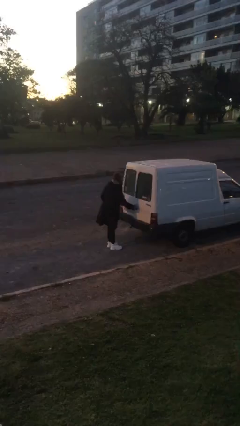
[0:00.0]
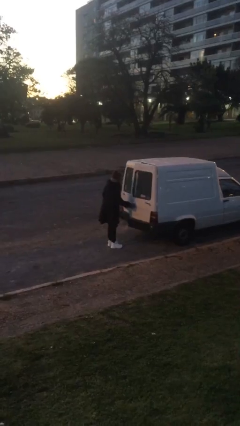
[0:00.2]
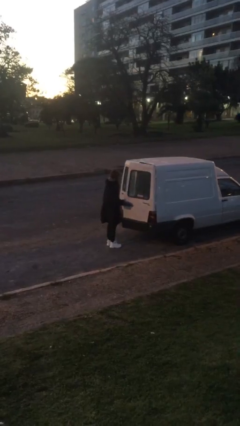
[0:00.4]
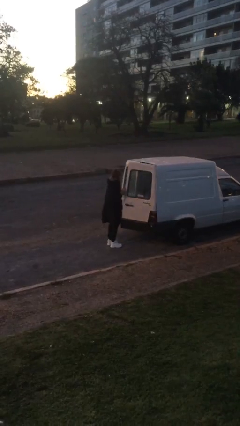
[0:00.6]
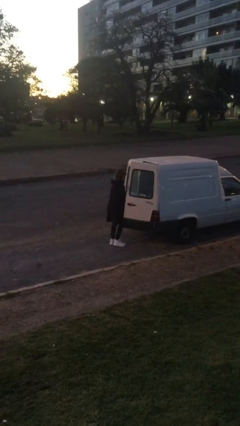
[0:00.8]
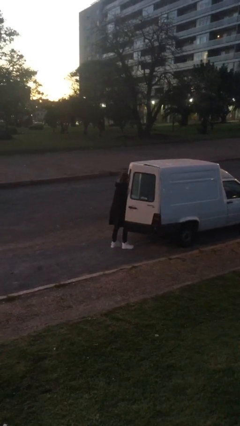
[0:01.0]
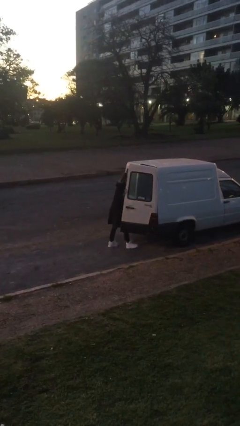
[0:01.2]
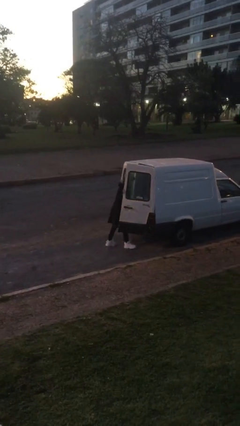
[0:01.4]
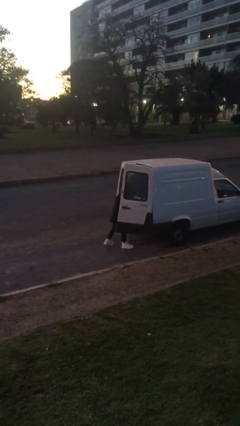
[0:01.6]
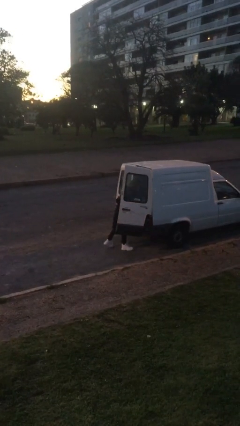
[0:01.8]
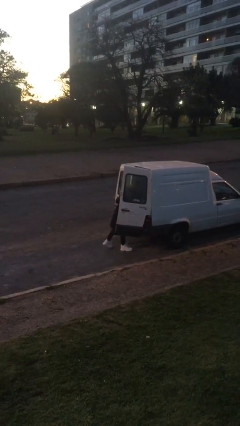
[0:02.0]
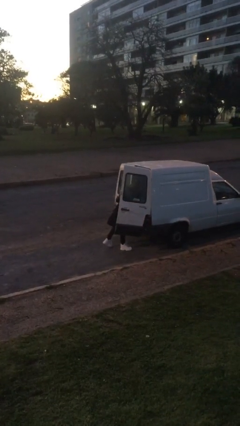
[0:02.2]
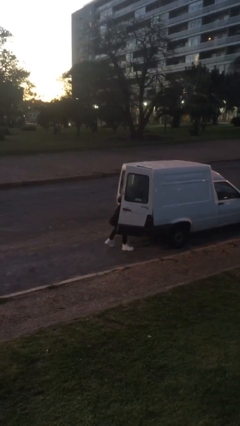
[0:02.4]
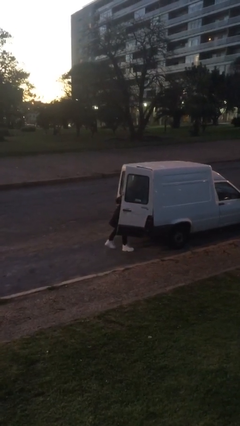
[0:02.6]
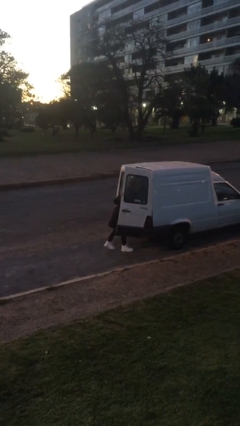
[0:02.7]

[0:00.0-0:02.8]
person opens car door

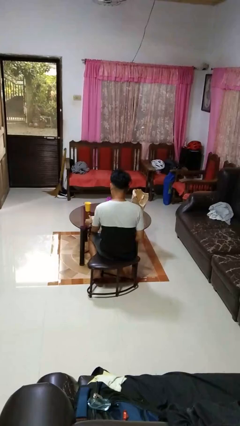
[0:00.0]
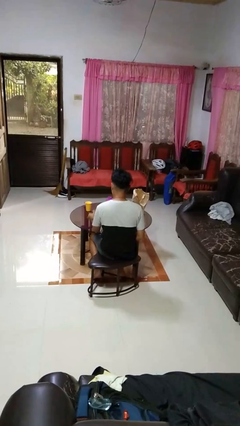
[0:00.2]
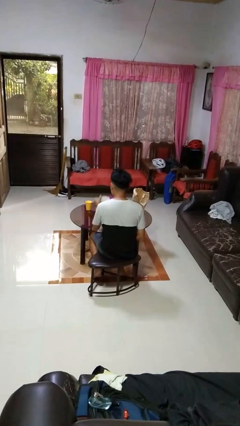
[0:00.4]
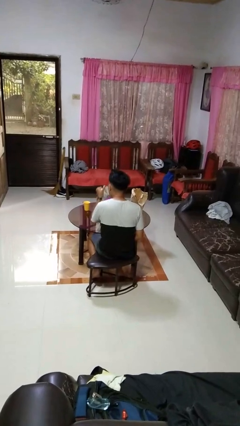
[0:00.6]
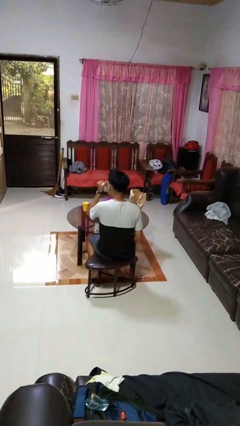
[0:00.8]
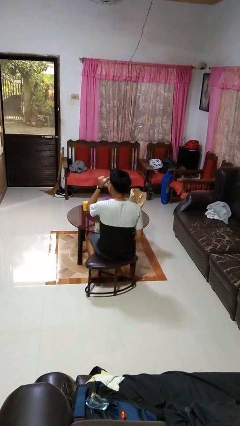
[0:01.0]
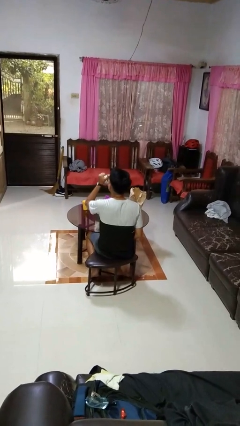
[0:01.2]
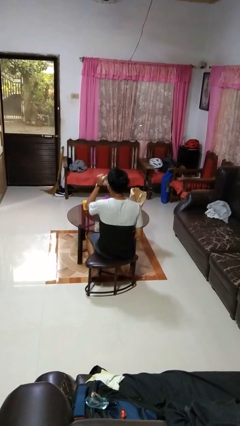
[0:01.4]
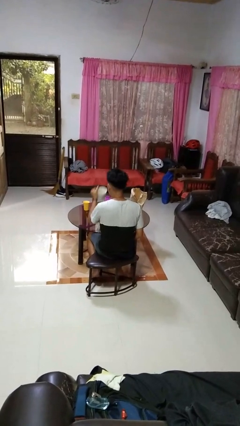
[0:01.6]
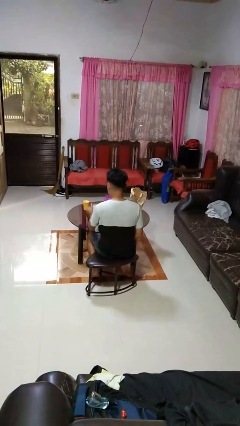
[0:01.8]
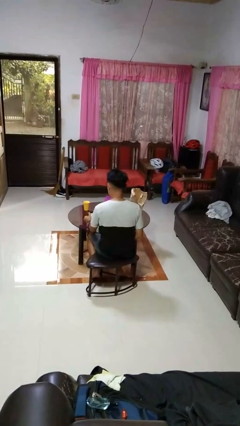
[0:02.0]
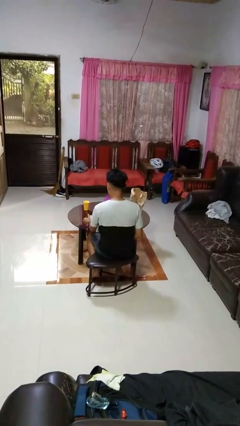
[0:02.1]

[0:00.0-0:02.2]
person drinks from mug

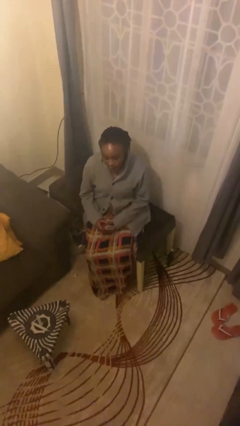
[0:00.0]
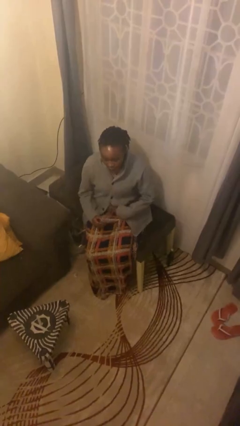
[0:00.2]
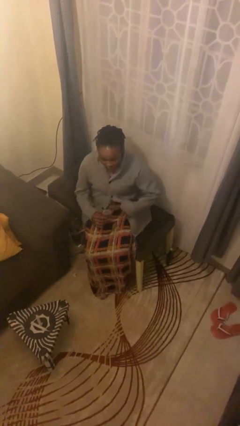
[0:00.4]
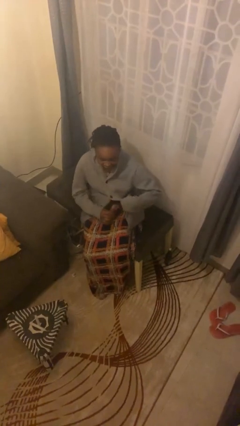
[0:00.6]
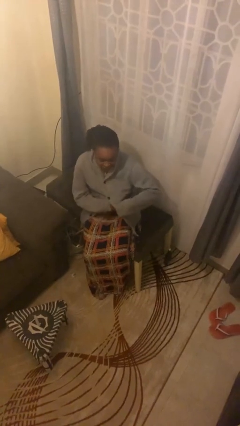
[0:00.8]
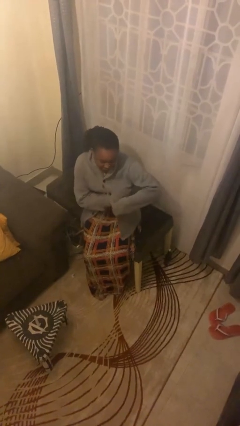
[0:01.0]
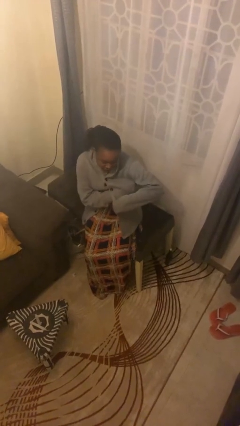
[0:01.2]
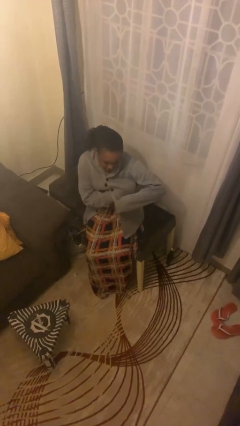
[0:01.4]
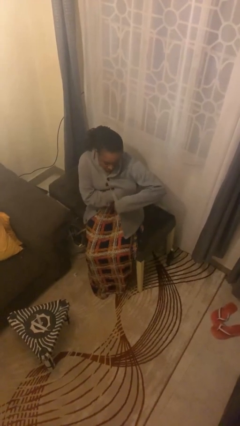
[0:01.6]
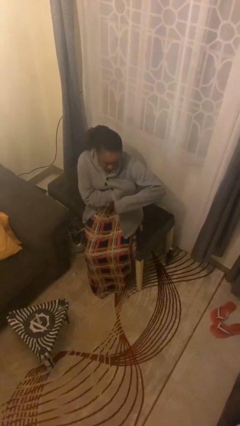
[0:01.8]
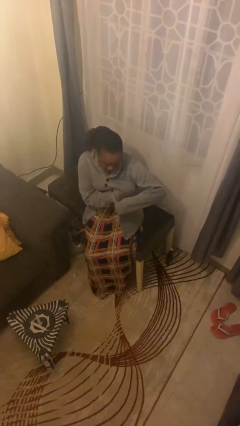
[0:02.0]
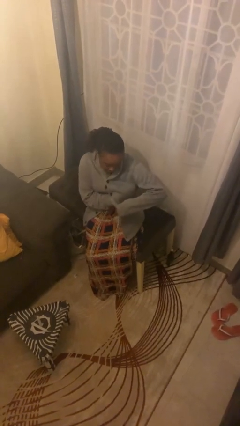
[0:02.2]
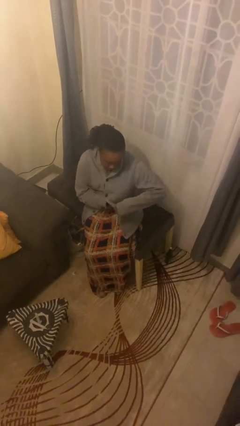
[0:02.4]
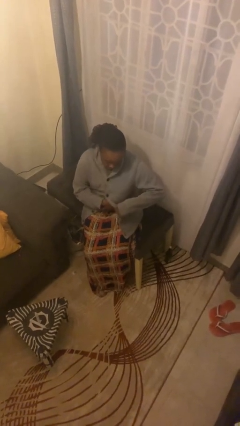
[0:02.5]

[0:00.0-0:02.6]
person applies deodorant

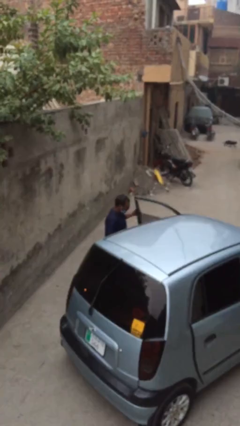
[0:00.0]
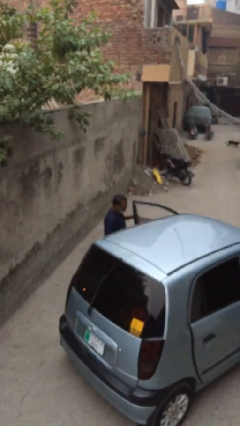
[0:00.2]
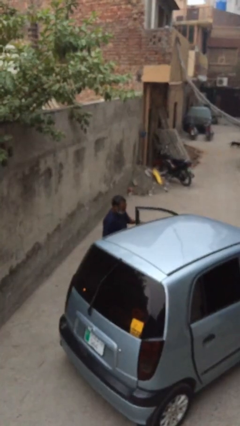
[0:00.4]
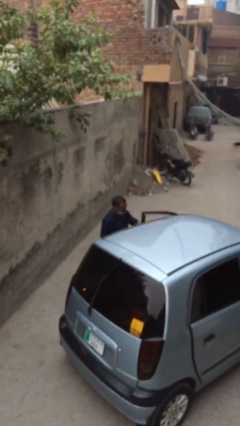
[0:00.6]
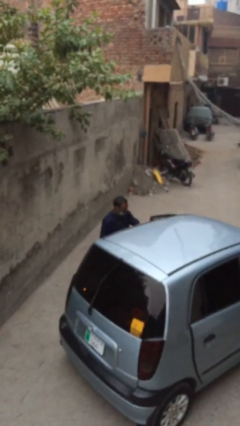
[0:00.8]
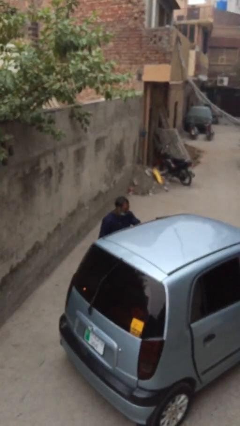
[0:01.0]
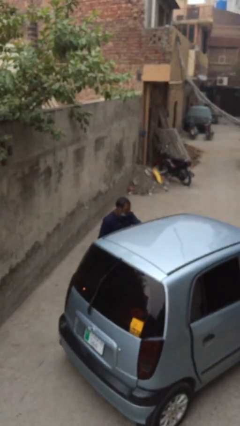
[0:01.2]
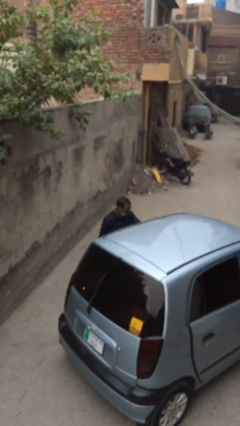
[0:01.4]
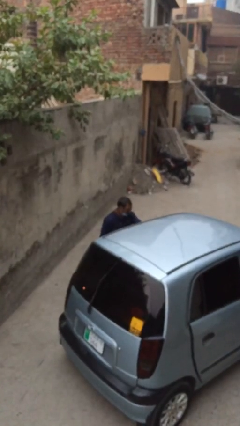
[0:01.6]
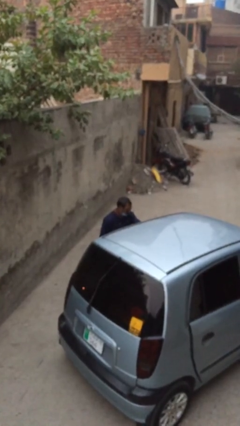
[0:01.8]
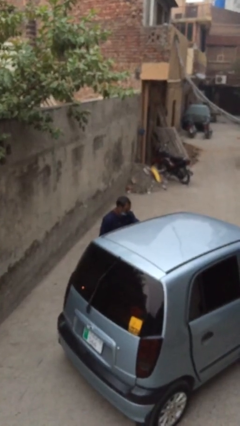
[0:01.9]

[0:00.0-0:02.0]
person closes car door

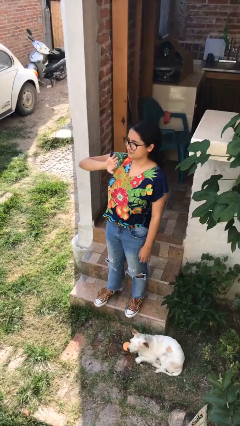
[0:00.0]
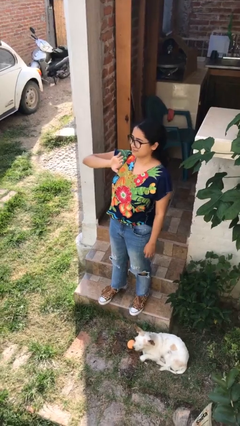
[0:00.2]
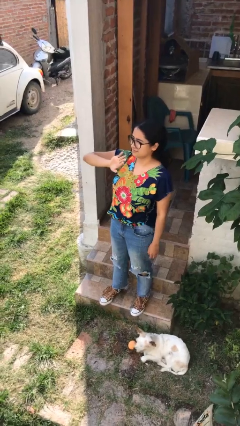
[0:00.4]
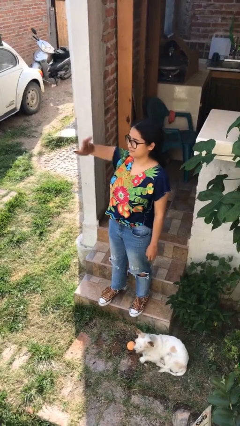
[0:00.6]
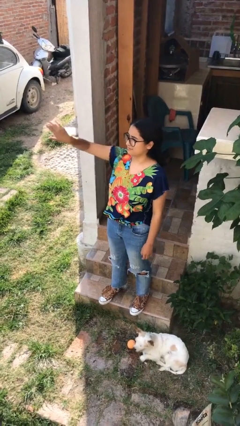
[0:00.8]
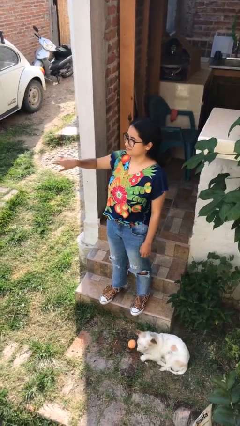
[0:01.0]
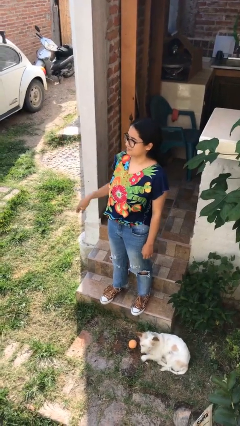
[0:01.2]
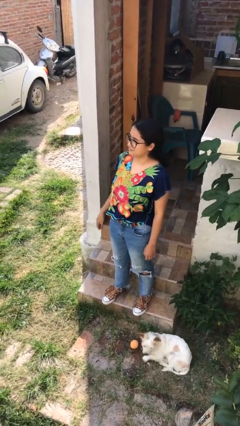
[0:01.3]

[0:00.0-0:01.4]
person gestures swipe right

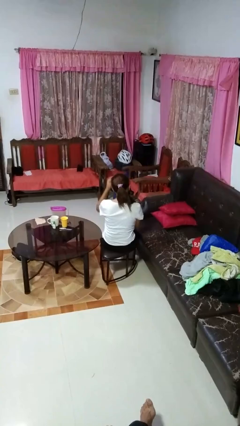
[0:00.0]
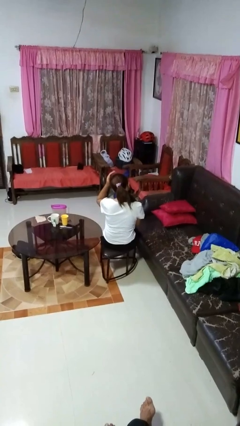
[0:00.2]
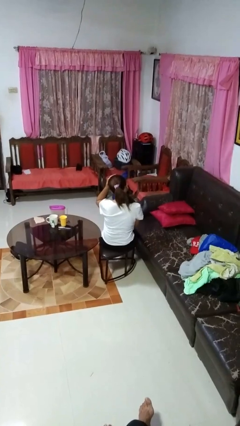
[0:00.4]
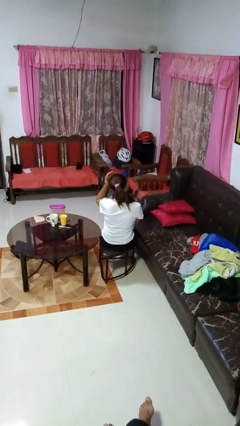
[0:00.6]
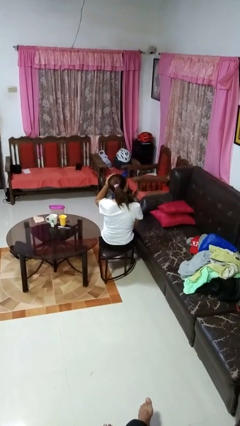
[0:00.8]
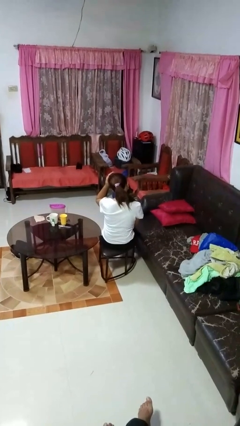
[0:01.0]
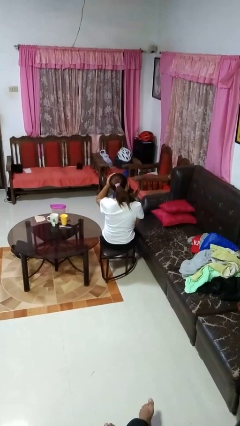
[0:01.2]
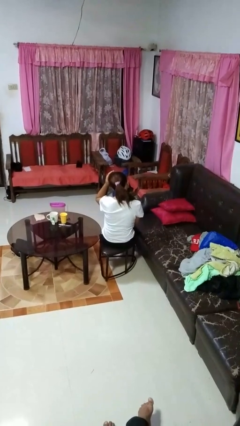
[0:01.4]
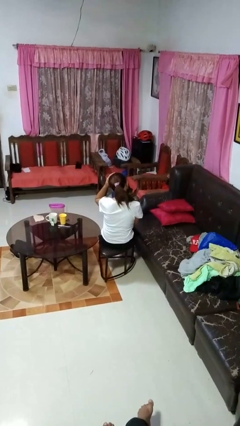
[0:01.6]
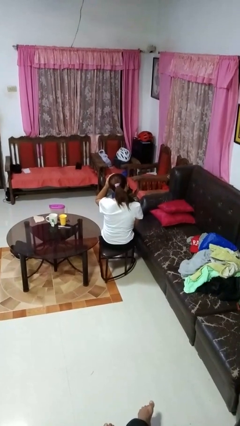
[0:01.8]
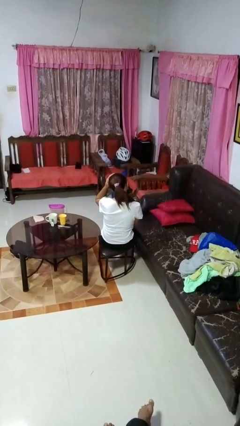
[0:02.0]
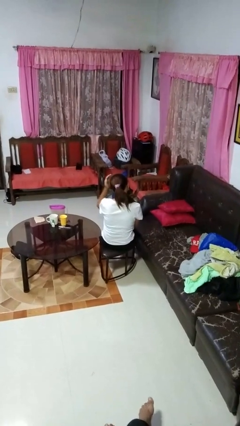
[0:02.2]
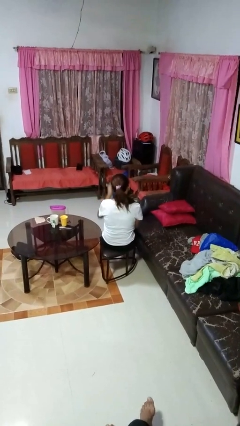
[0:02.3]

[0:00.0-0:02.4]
person pats head

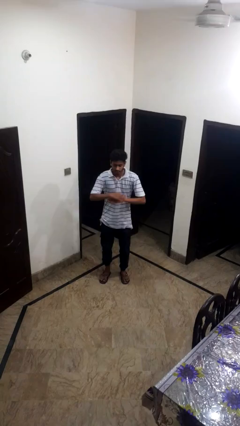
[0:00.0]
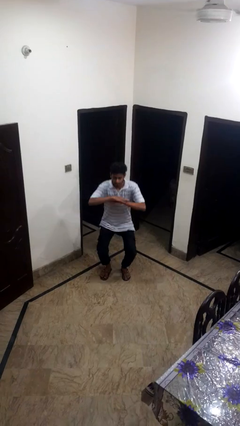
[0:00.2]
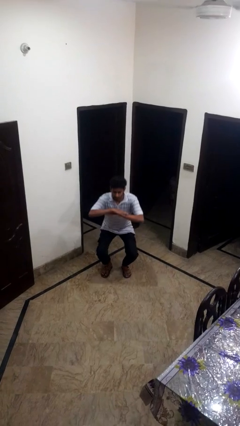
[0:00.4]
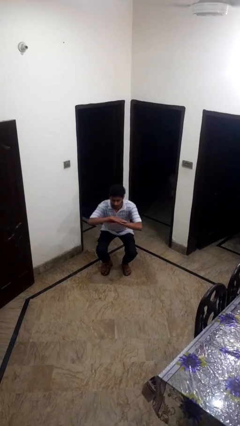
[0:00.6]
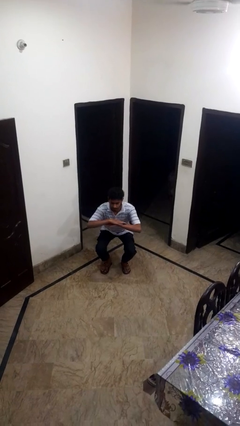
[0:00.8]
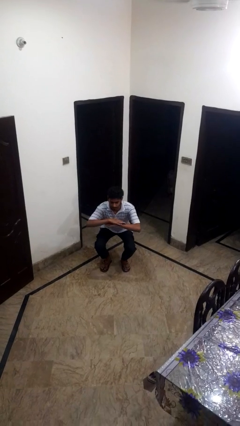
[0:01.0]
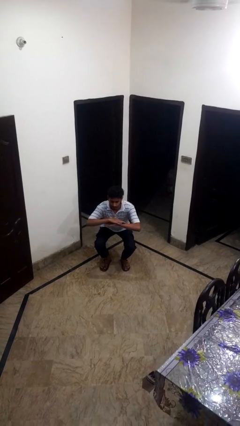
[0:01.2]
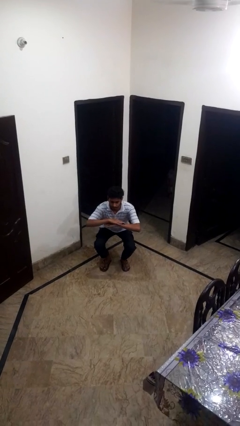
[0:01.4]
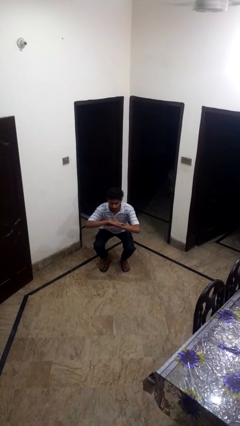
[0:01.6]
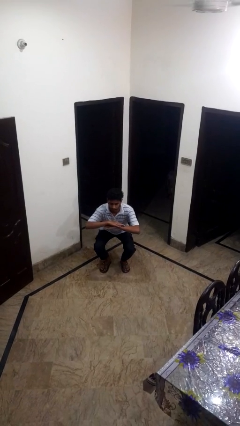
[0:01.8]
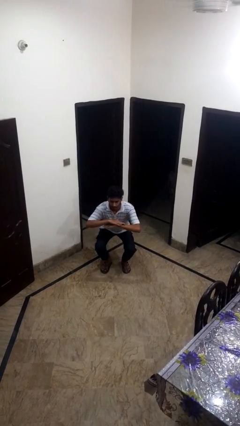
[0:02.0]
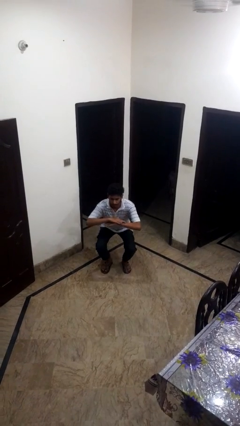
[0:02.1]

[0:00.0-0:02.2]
person squats

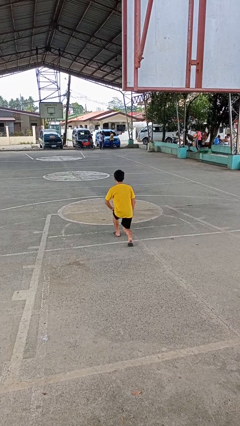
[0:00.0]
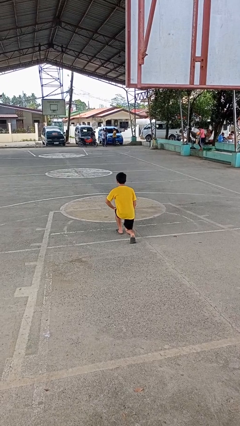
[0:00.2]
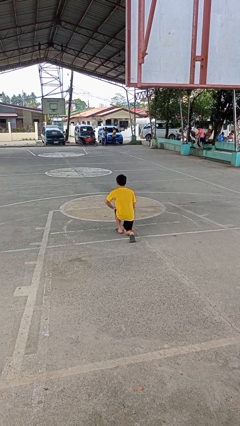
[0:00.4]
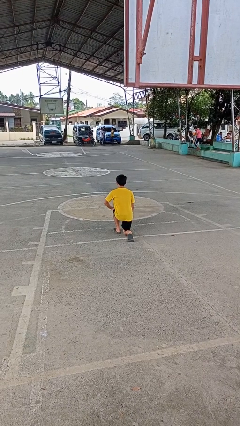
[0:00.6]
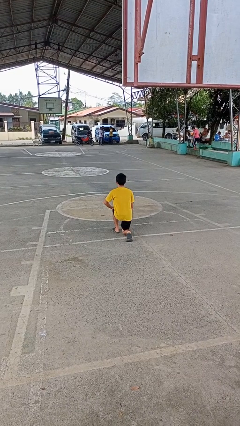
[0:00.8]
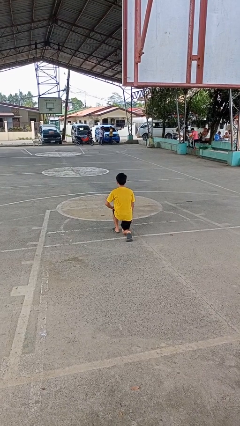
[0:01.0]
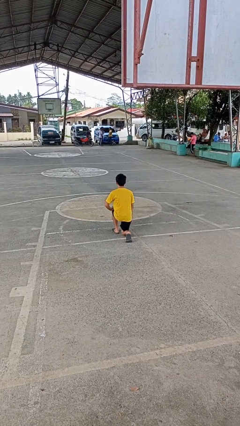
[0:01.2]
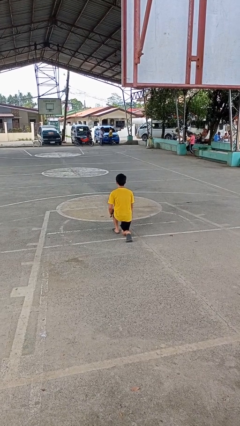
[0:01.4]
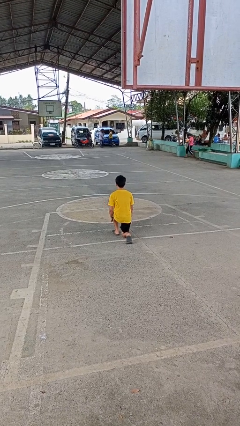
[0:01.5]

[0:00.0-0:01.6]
person kneels
